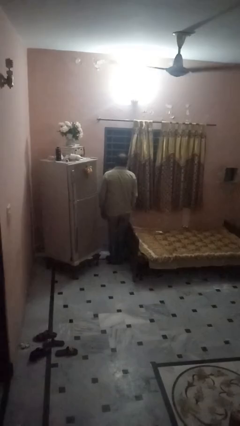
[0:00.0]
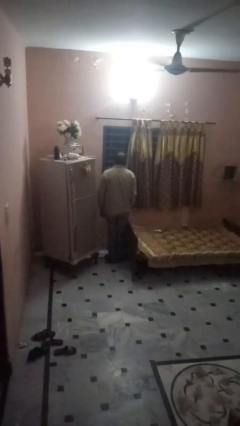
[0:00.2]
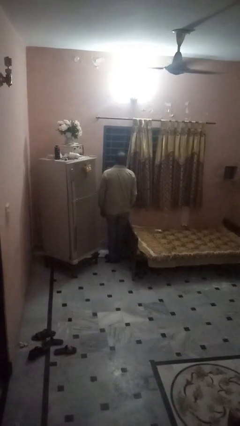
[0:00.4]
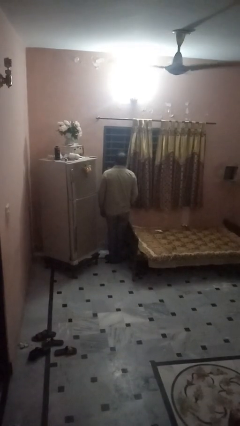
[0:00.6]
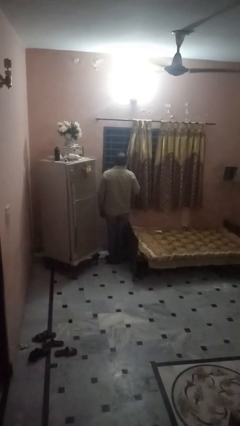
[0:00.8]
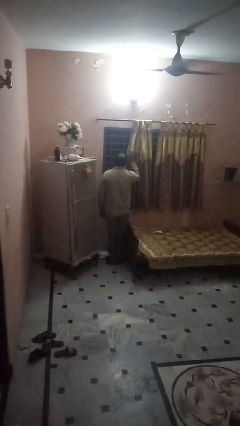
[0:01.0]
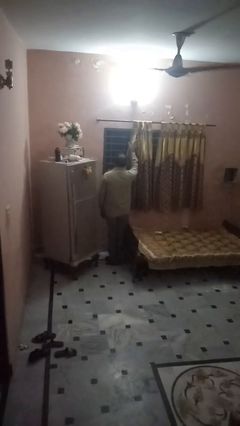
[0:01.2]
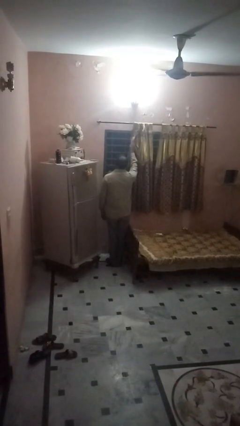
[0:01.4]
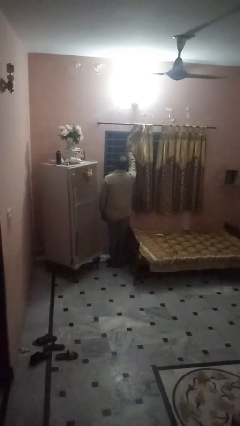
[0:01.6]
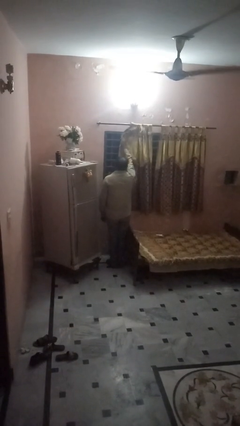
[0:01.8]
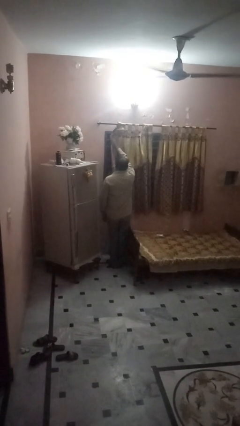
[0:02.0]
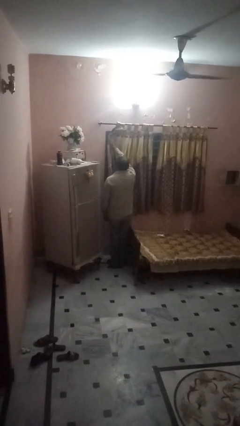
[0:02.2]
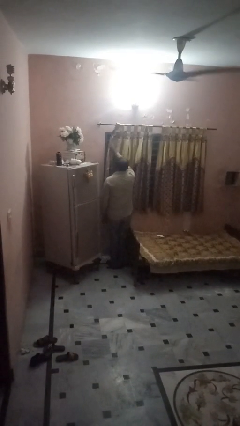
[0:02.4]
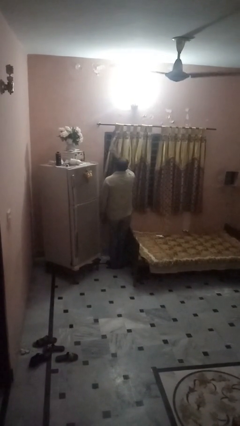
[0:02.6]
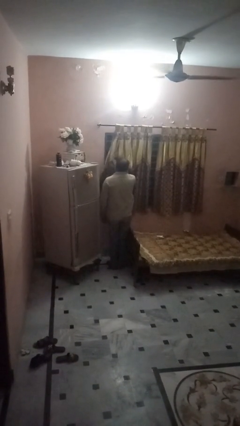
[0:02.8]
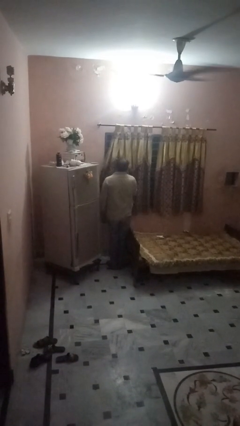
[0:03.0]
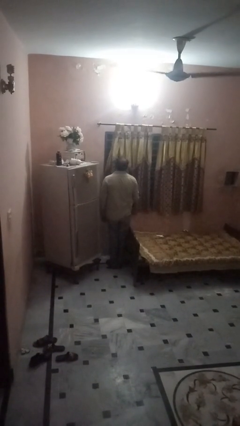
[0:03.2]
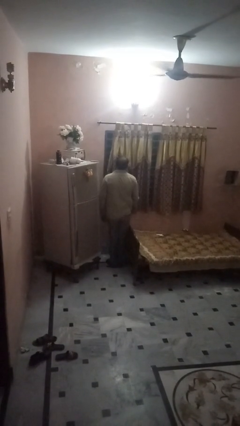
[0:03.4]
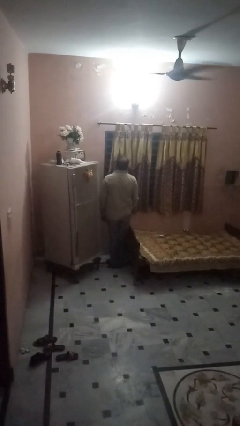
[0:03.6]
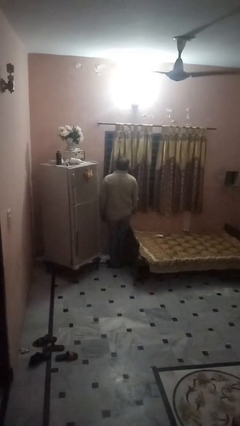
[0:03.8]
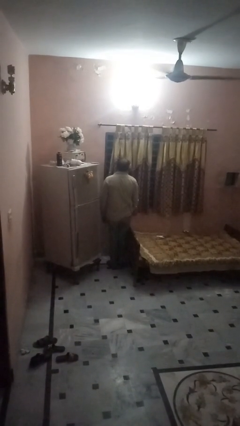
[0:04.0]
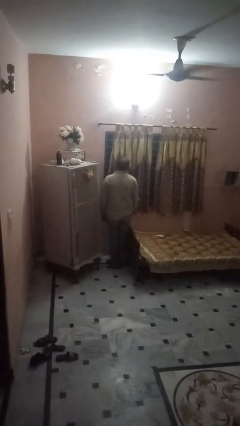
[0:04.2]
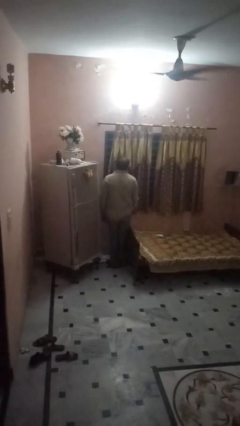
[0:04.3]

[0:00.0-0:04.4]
person closes curtains

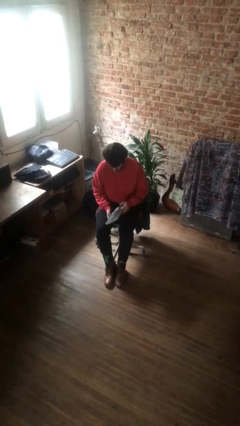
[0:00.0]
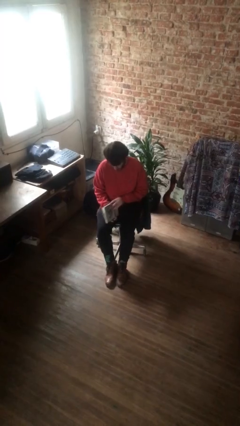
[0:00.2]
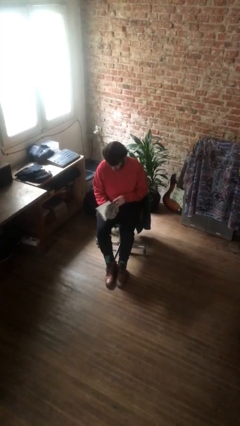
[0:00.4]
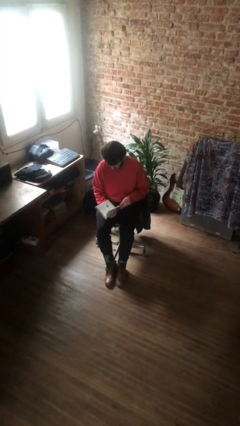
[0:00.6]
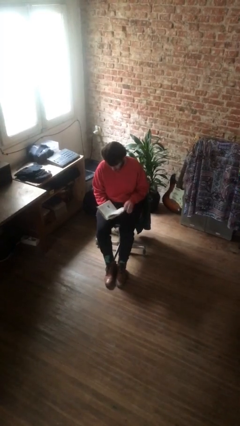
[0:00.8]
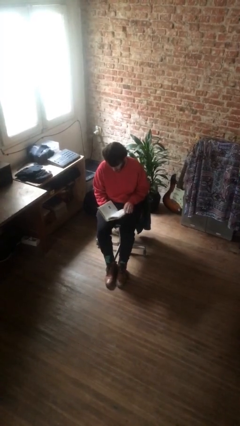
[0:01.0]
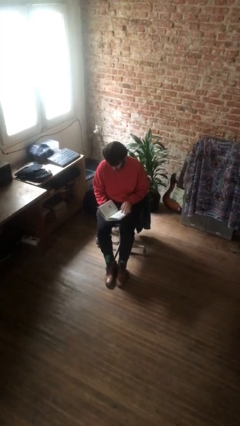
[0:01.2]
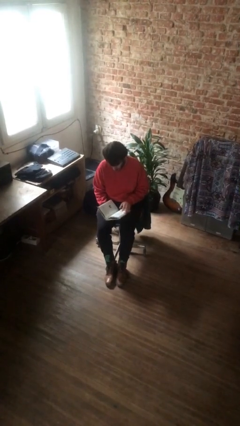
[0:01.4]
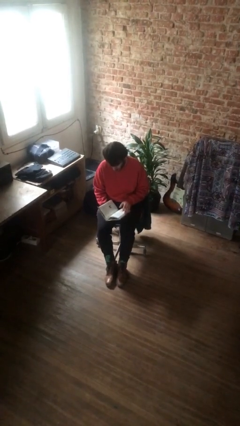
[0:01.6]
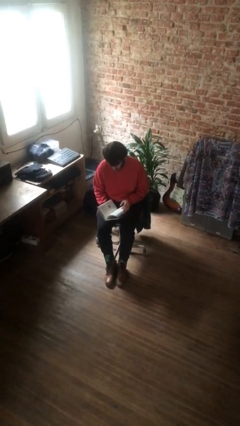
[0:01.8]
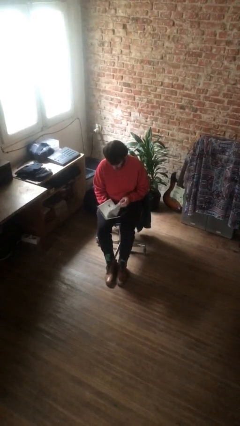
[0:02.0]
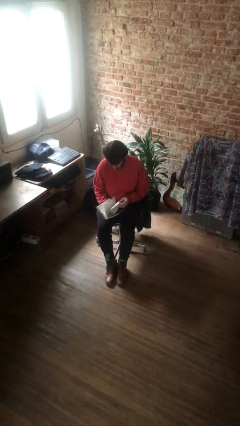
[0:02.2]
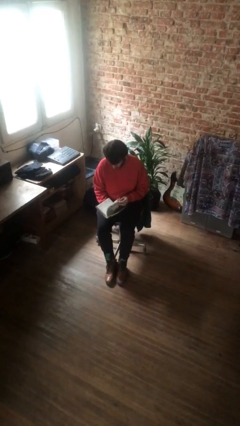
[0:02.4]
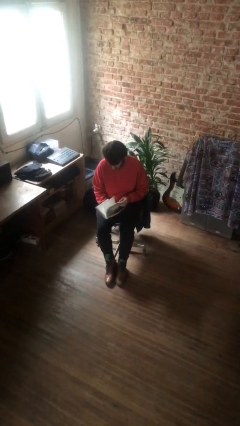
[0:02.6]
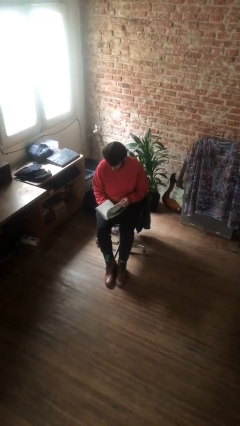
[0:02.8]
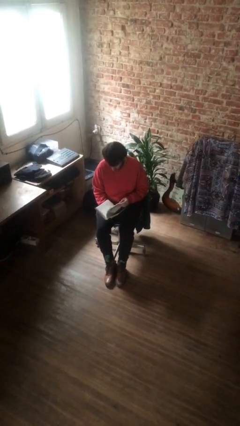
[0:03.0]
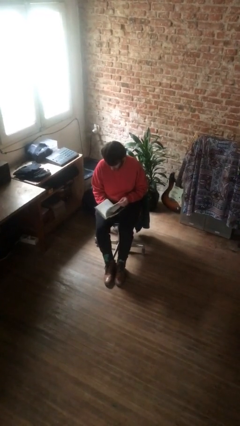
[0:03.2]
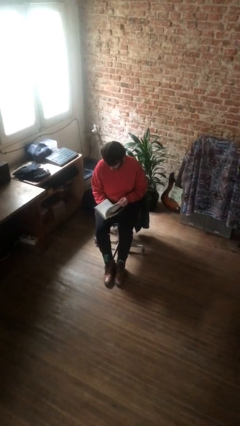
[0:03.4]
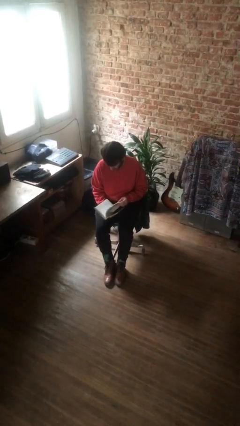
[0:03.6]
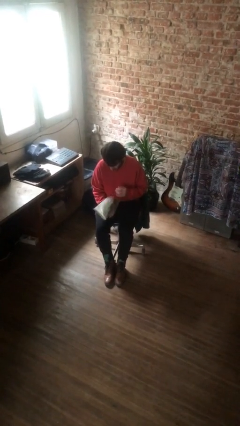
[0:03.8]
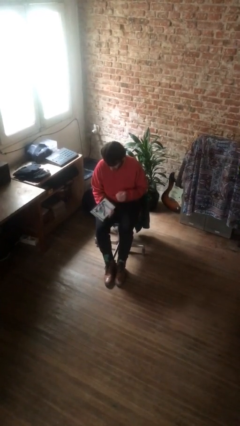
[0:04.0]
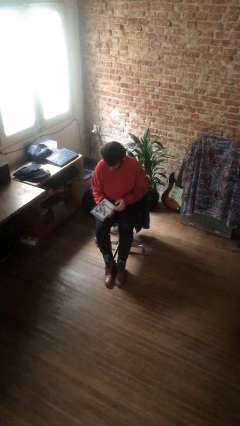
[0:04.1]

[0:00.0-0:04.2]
person reads book

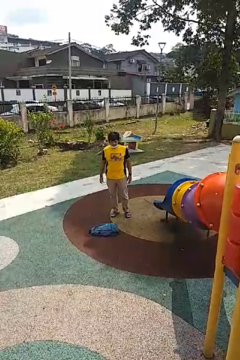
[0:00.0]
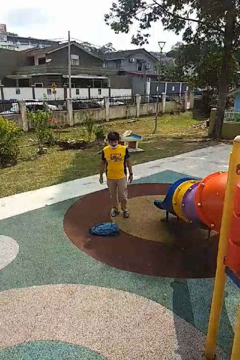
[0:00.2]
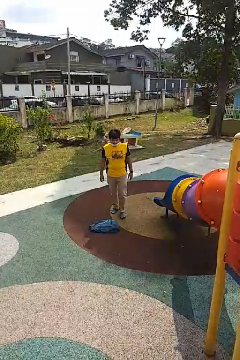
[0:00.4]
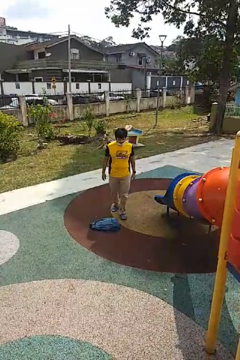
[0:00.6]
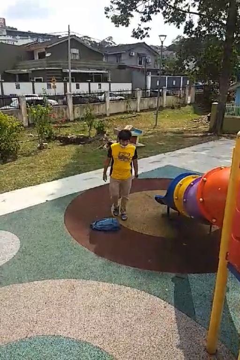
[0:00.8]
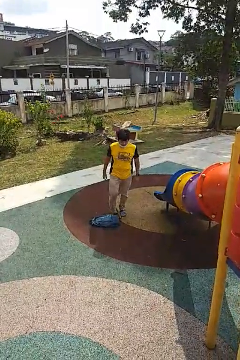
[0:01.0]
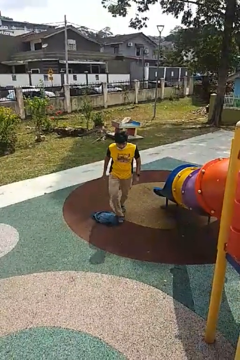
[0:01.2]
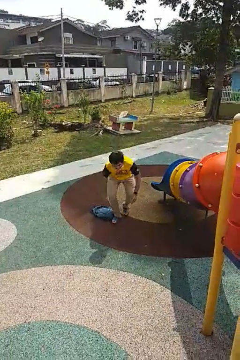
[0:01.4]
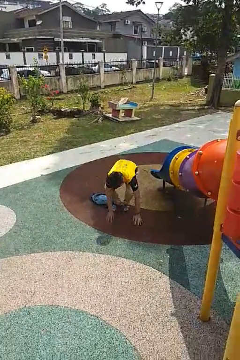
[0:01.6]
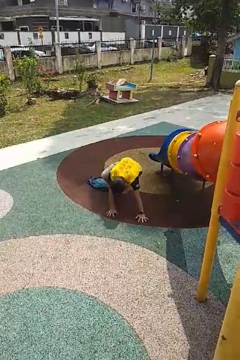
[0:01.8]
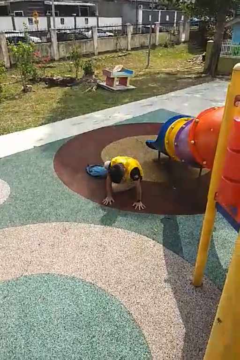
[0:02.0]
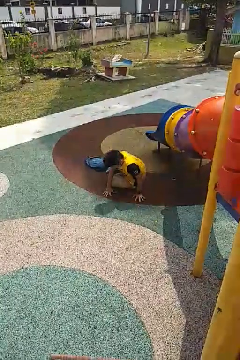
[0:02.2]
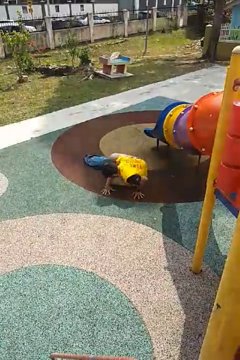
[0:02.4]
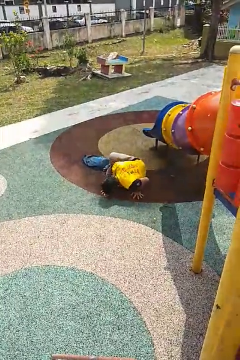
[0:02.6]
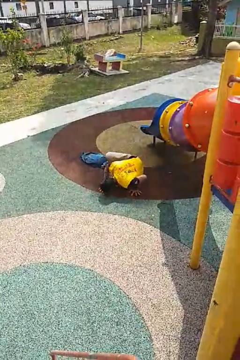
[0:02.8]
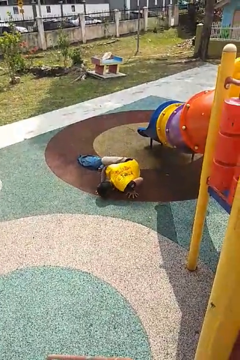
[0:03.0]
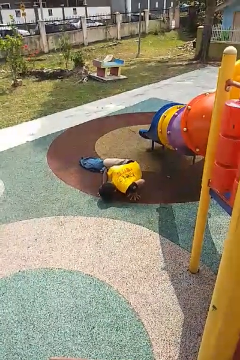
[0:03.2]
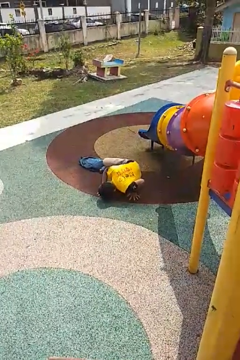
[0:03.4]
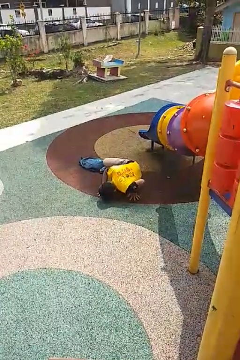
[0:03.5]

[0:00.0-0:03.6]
person trips on object on floor

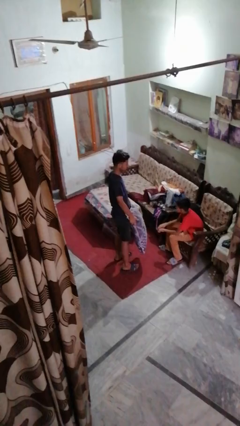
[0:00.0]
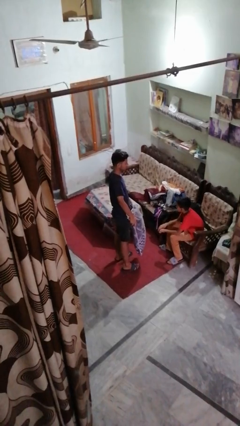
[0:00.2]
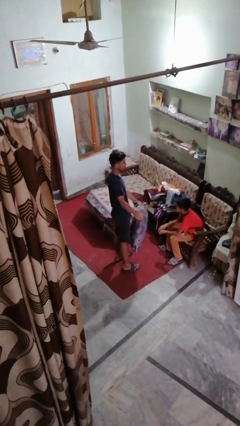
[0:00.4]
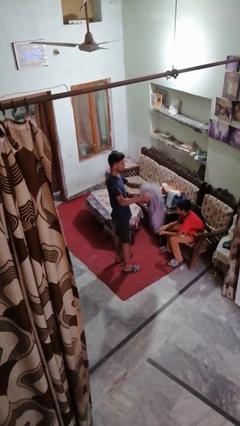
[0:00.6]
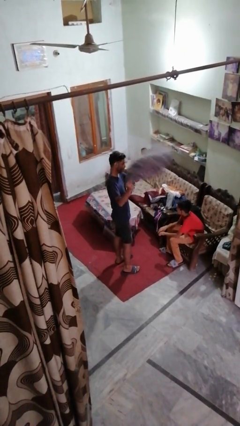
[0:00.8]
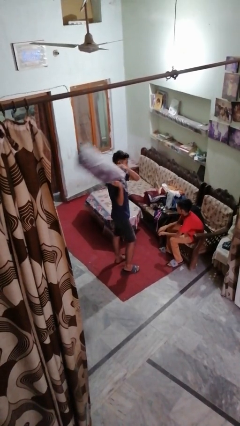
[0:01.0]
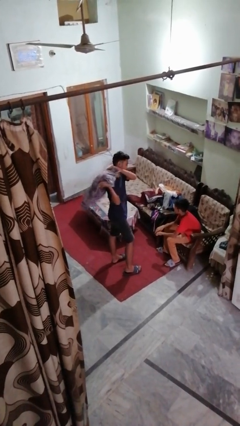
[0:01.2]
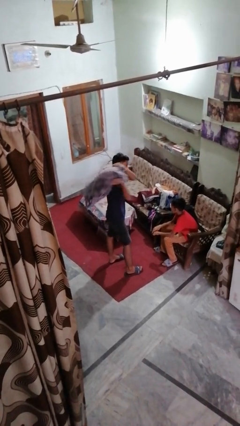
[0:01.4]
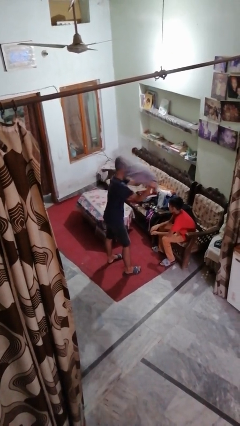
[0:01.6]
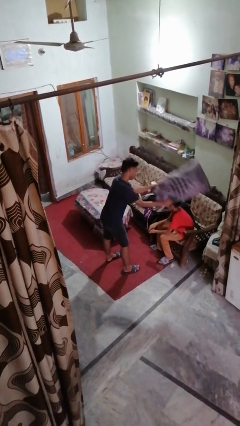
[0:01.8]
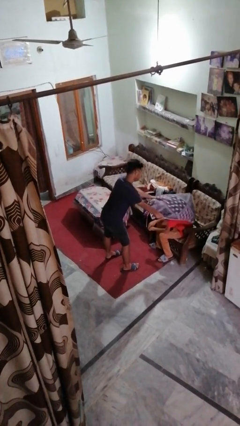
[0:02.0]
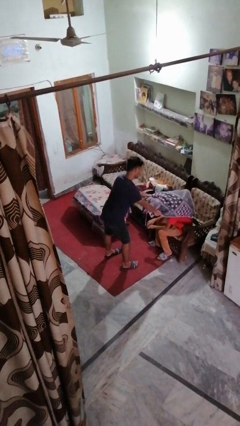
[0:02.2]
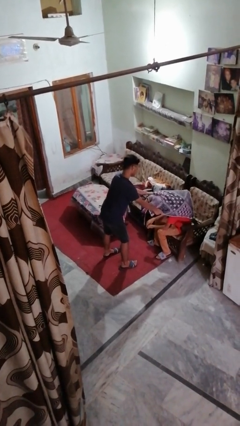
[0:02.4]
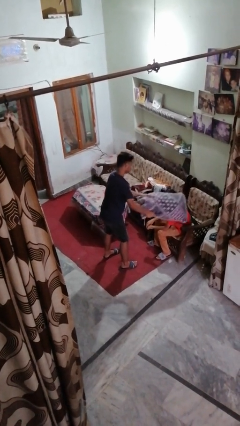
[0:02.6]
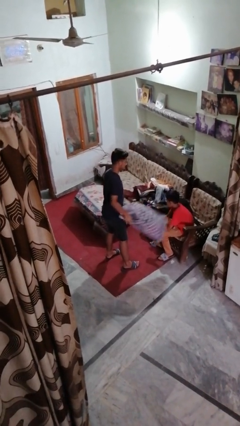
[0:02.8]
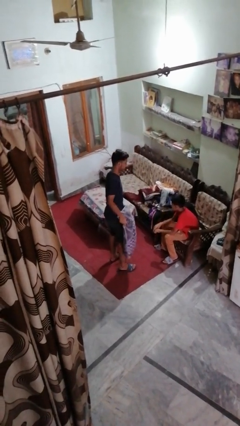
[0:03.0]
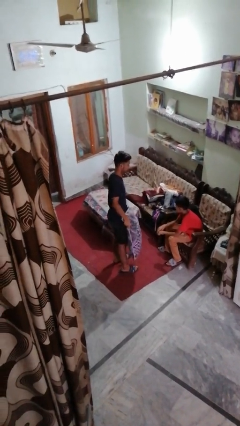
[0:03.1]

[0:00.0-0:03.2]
person hits person with pillow

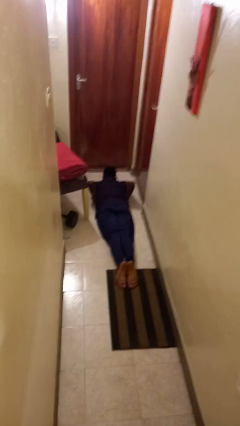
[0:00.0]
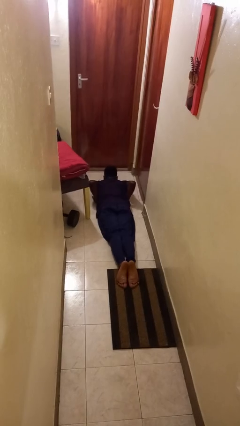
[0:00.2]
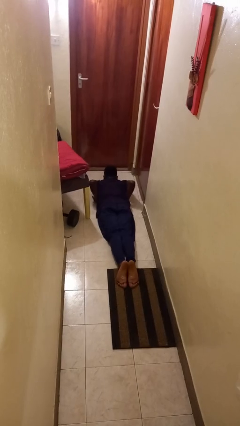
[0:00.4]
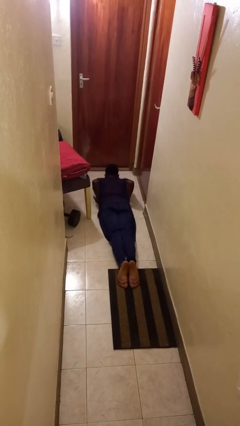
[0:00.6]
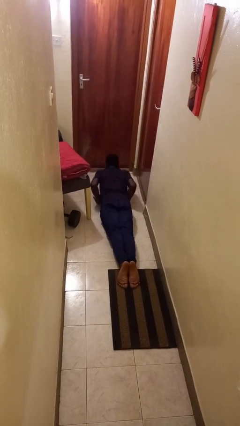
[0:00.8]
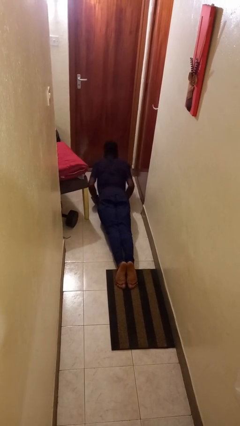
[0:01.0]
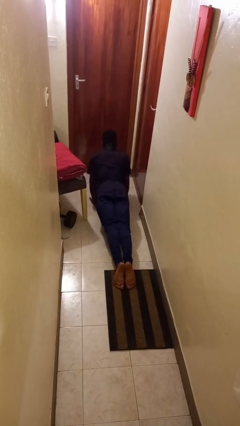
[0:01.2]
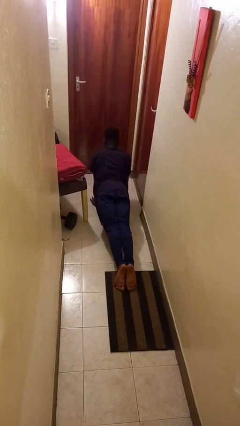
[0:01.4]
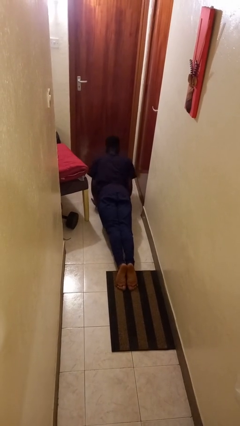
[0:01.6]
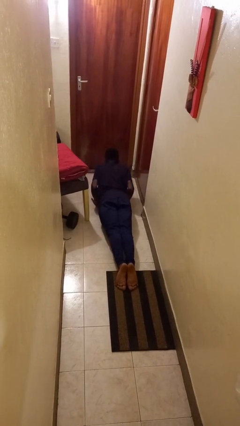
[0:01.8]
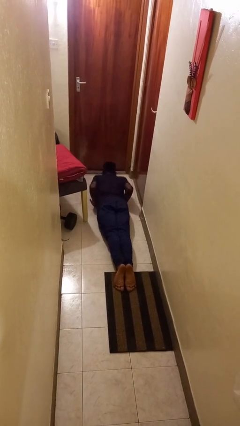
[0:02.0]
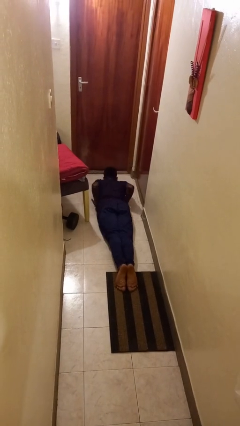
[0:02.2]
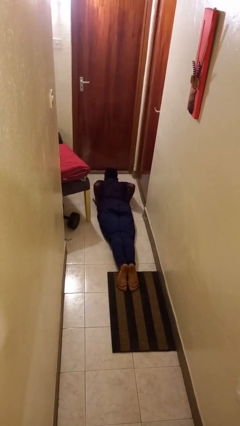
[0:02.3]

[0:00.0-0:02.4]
person exercises with pushup

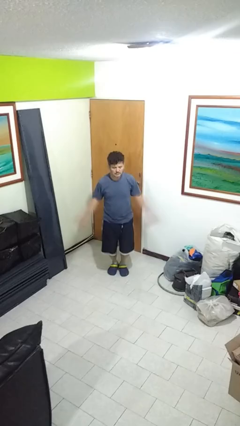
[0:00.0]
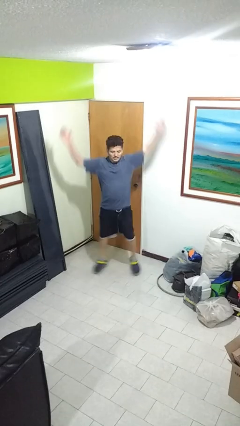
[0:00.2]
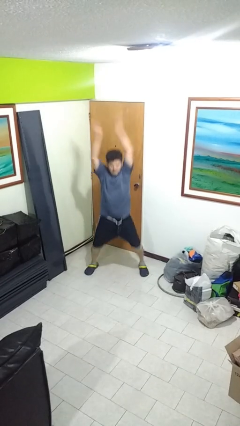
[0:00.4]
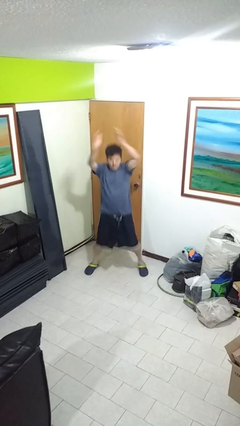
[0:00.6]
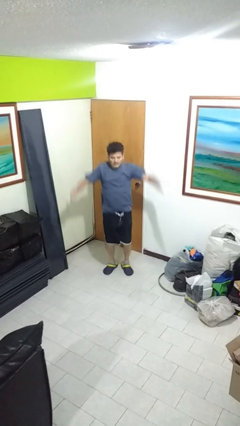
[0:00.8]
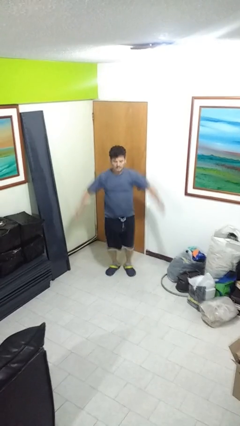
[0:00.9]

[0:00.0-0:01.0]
person exercises with jumping jacks
